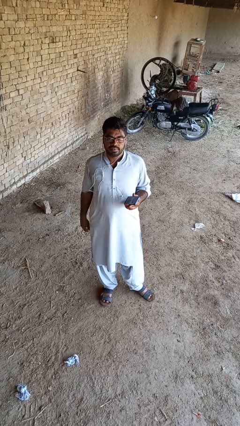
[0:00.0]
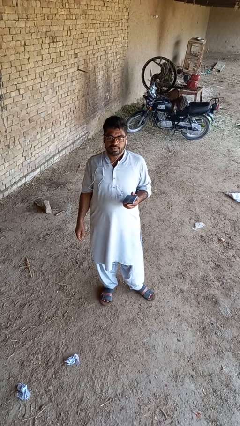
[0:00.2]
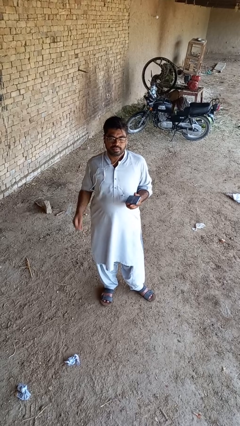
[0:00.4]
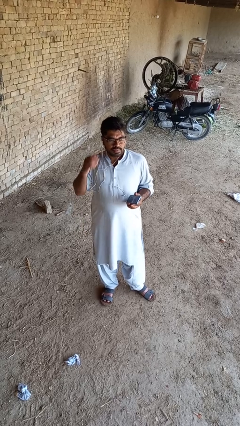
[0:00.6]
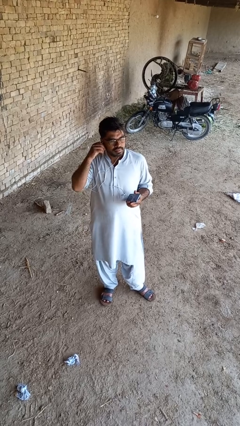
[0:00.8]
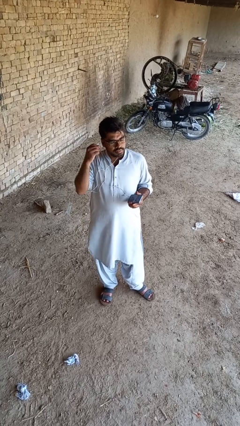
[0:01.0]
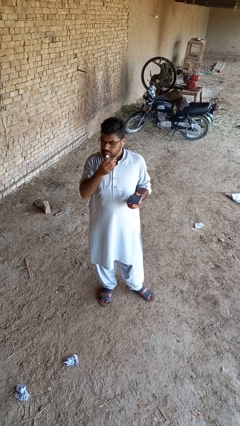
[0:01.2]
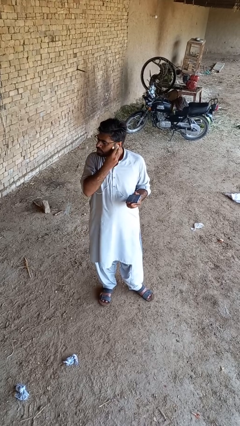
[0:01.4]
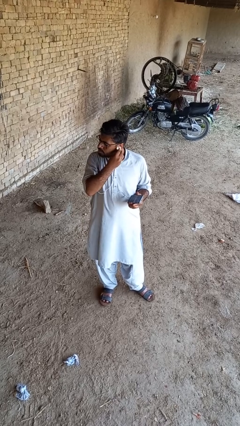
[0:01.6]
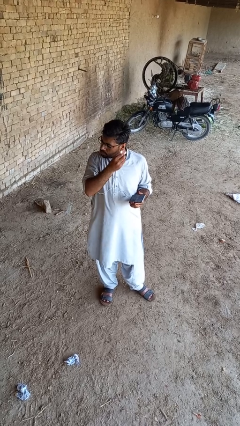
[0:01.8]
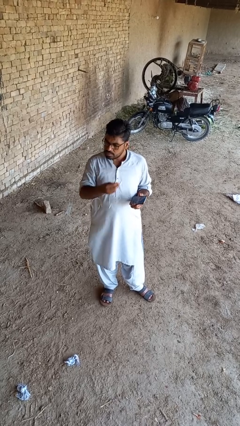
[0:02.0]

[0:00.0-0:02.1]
person takes off headphones

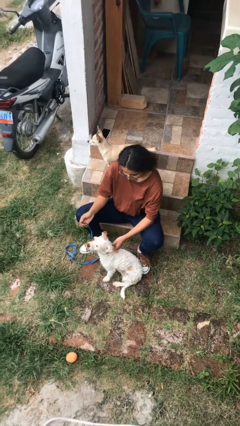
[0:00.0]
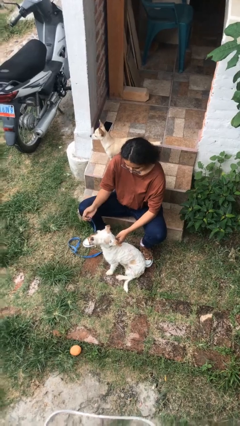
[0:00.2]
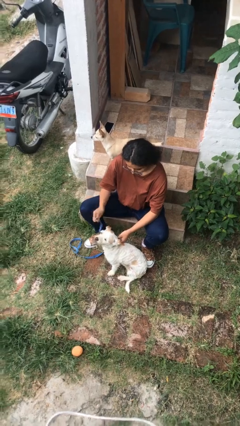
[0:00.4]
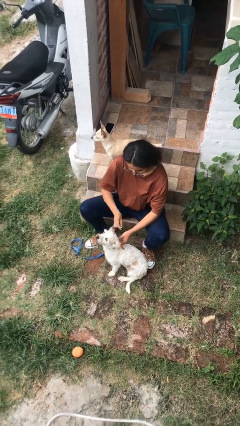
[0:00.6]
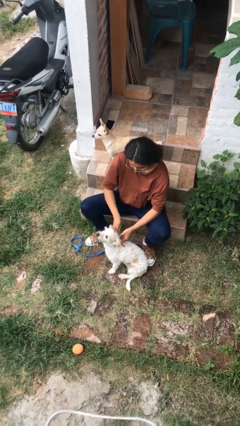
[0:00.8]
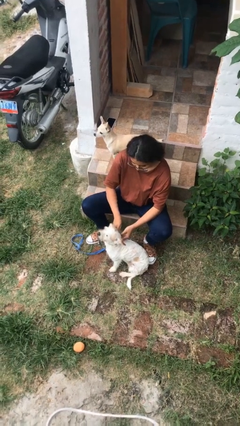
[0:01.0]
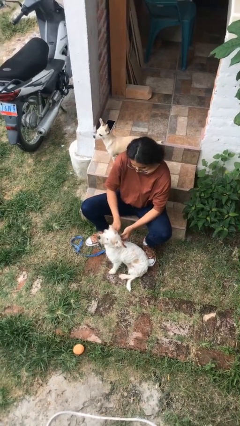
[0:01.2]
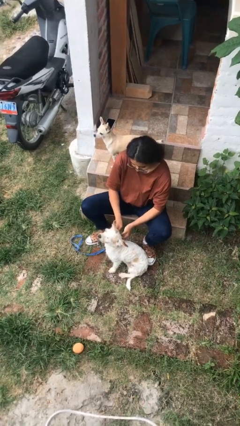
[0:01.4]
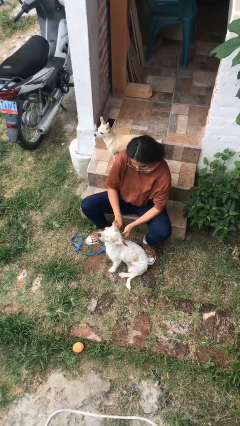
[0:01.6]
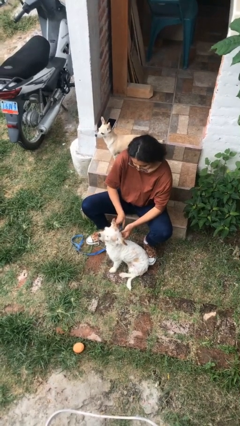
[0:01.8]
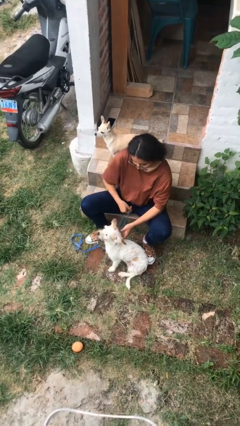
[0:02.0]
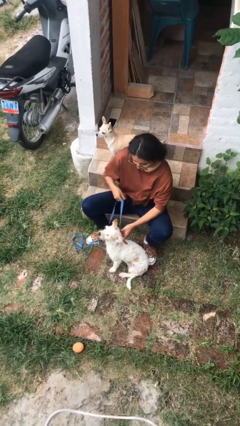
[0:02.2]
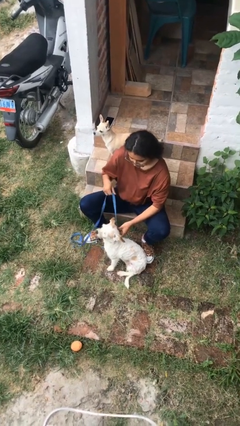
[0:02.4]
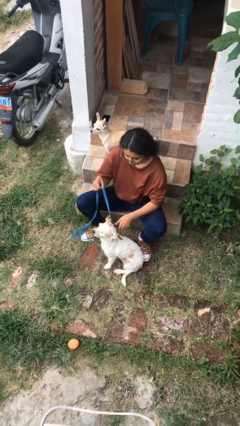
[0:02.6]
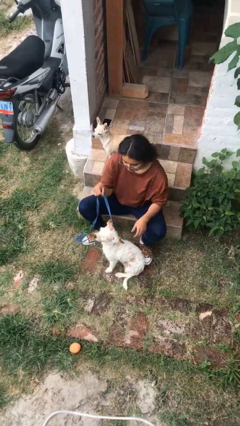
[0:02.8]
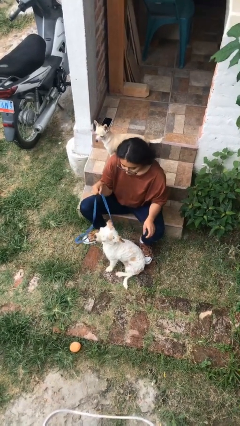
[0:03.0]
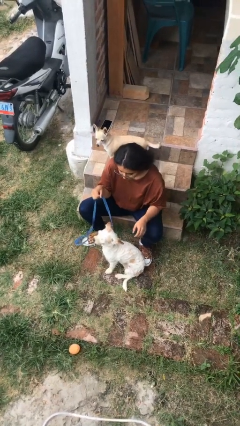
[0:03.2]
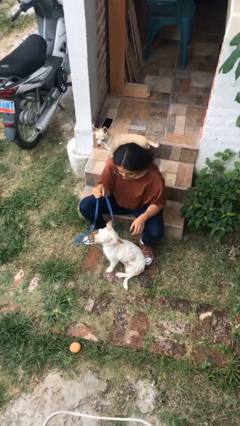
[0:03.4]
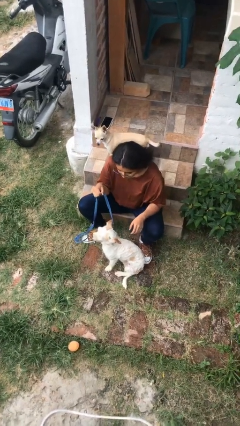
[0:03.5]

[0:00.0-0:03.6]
person attaches leash to dog

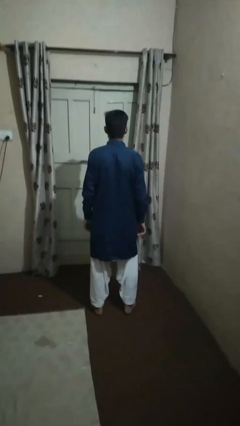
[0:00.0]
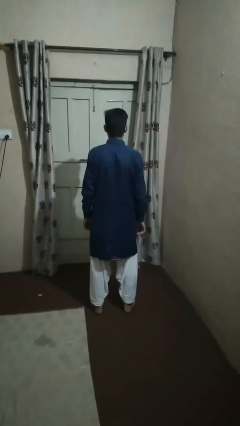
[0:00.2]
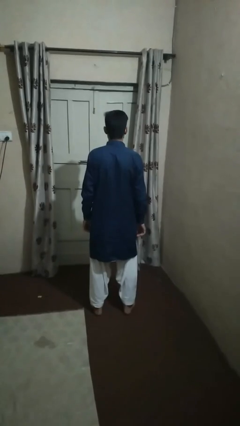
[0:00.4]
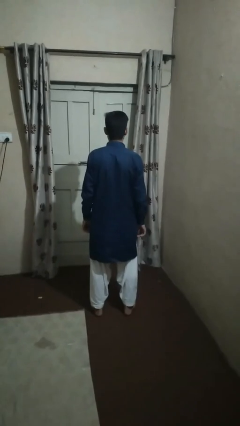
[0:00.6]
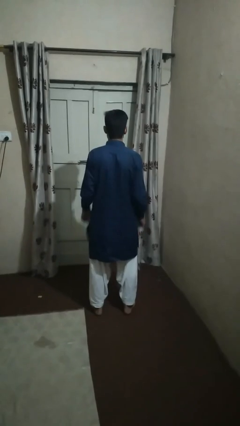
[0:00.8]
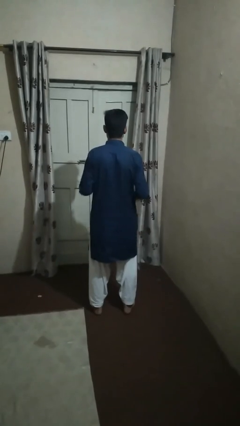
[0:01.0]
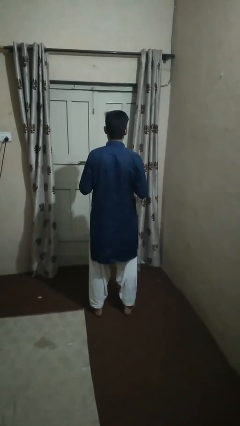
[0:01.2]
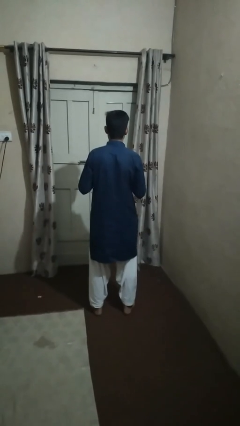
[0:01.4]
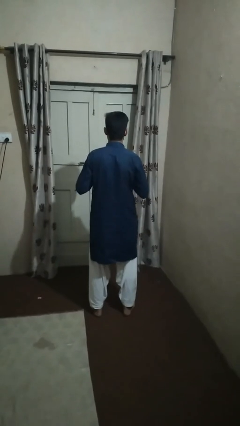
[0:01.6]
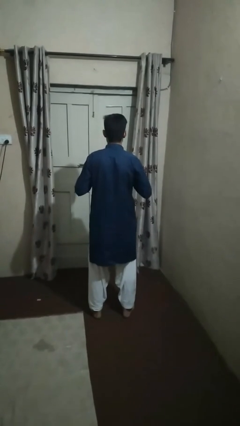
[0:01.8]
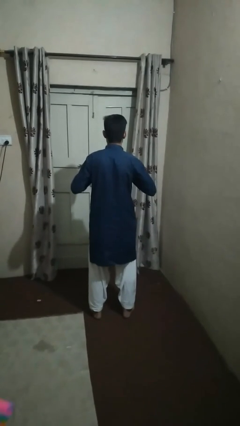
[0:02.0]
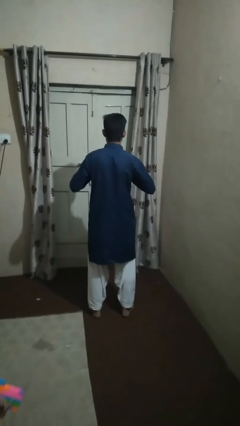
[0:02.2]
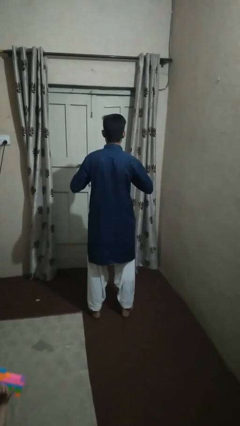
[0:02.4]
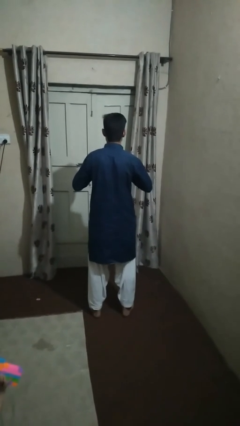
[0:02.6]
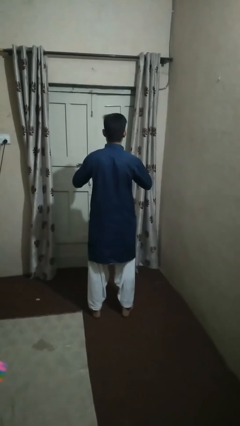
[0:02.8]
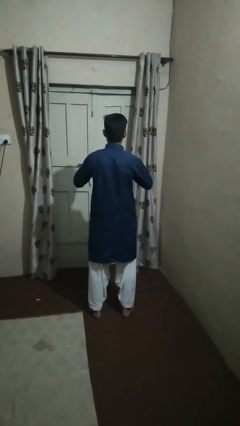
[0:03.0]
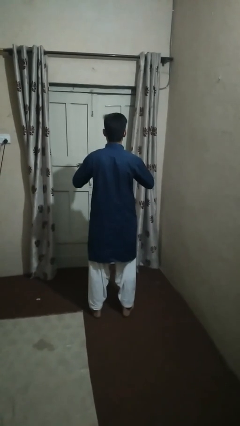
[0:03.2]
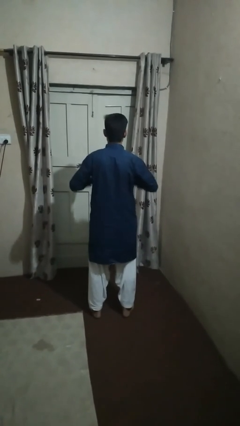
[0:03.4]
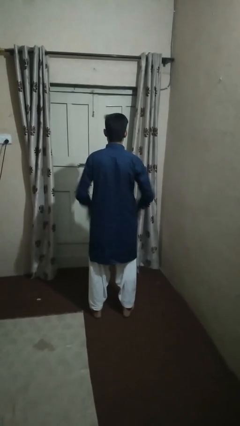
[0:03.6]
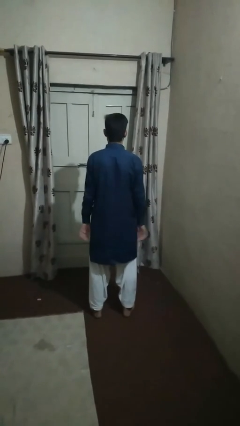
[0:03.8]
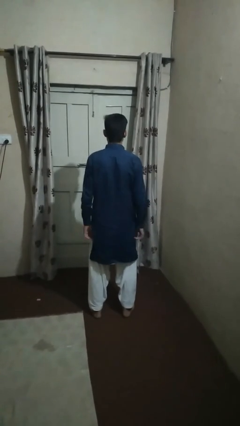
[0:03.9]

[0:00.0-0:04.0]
person unbuttons shirt

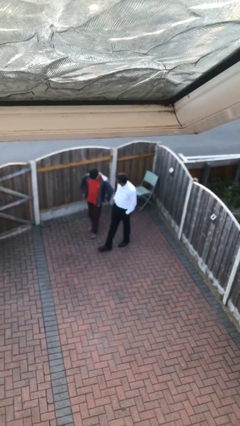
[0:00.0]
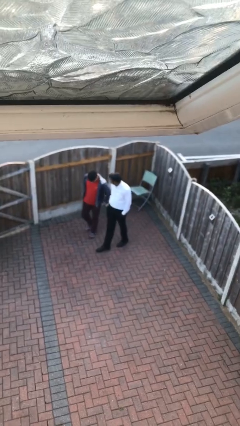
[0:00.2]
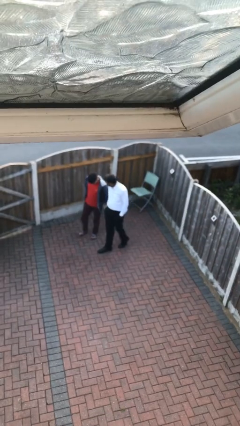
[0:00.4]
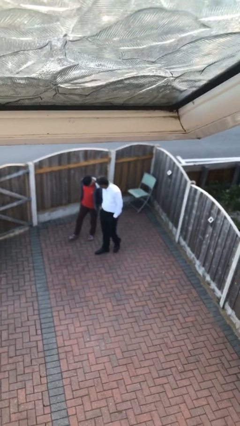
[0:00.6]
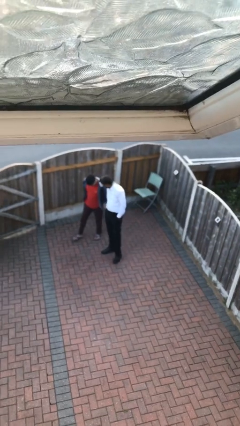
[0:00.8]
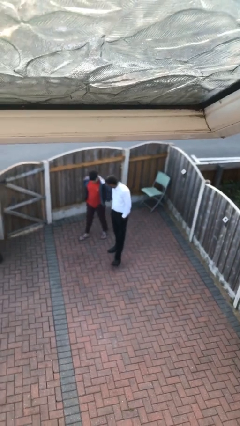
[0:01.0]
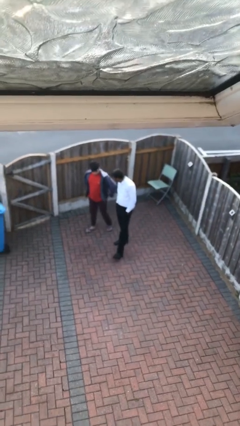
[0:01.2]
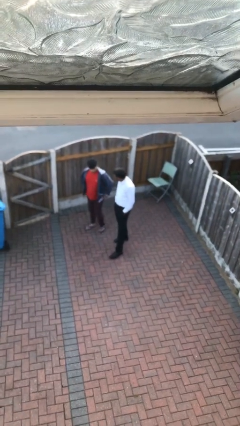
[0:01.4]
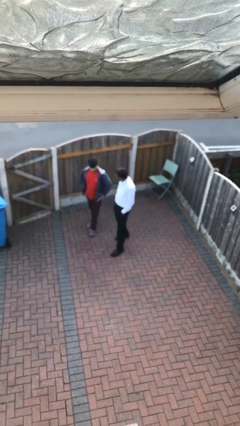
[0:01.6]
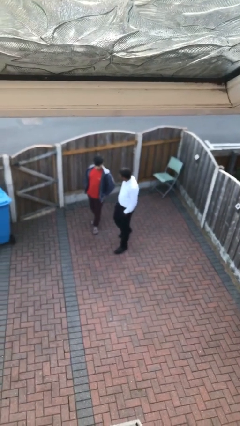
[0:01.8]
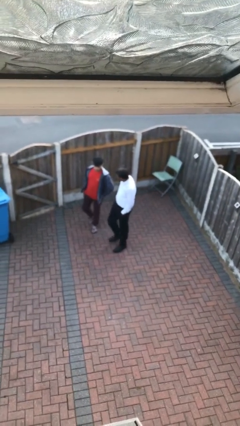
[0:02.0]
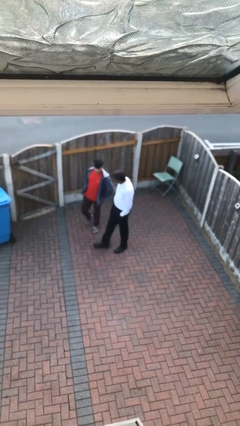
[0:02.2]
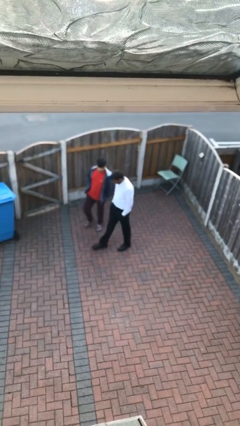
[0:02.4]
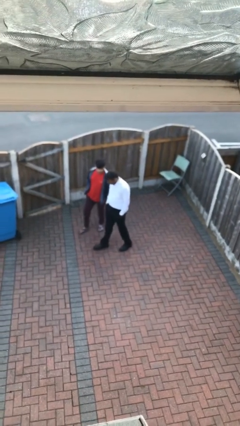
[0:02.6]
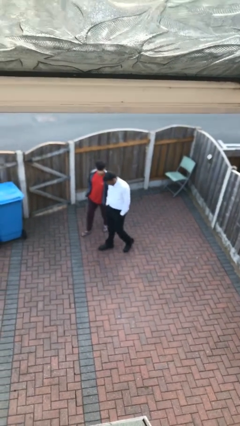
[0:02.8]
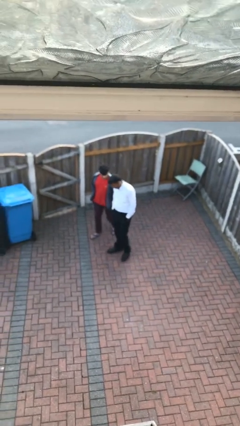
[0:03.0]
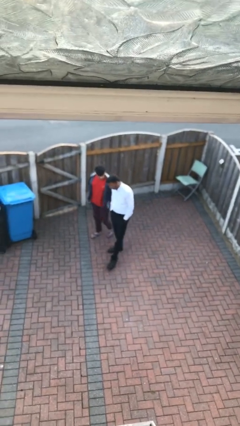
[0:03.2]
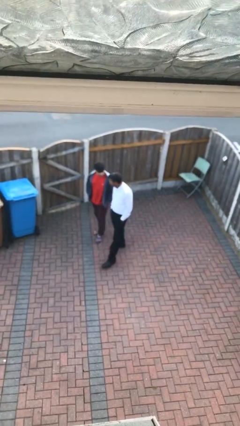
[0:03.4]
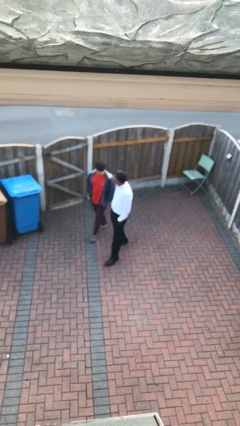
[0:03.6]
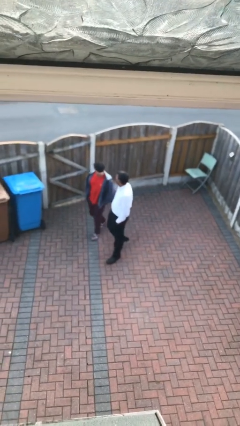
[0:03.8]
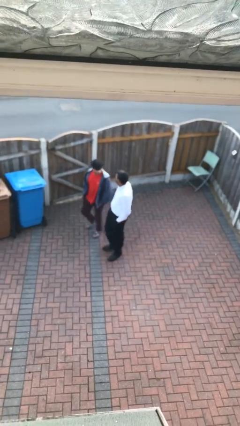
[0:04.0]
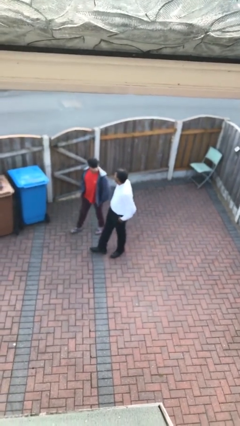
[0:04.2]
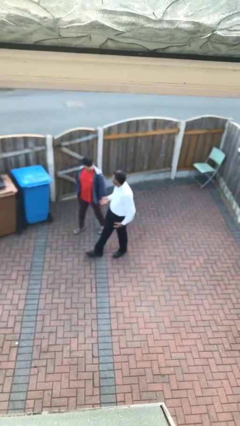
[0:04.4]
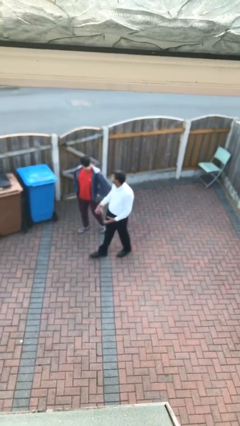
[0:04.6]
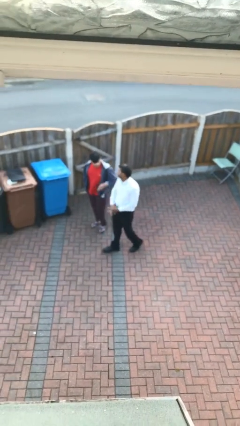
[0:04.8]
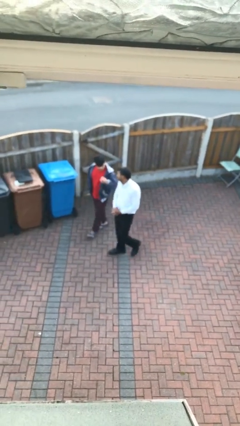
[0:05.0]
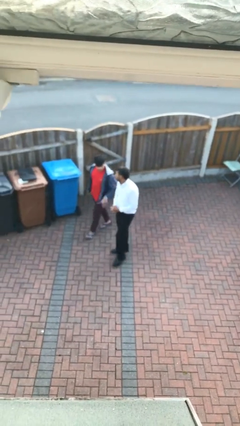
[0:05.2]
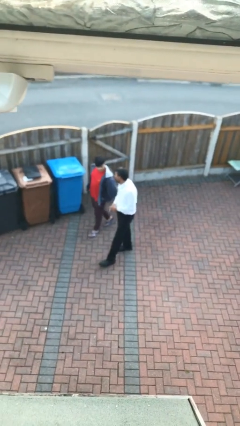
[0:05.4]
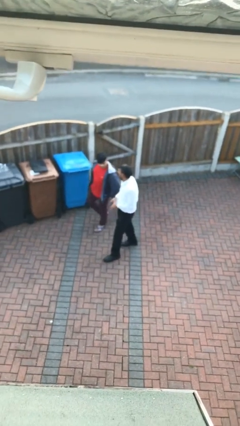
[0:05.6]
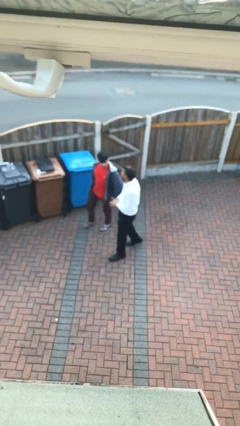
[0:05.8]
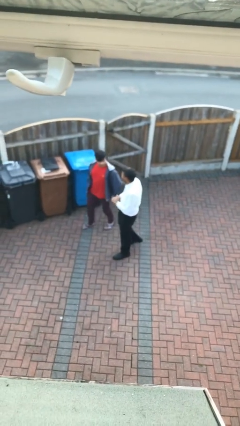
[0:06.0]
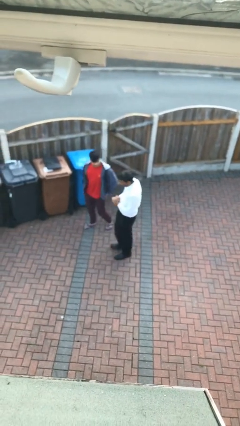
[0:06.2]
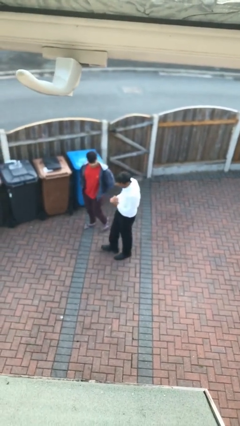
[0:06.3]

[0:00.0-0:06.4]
person talks to person

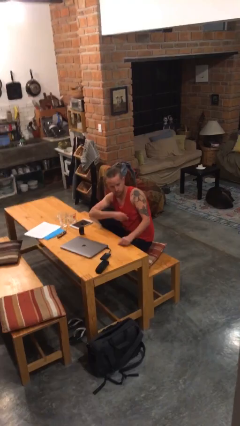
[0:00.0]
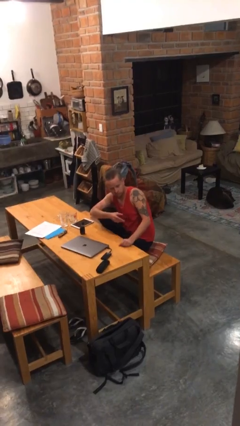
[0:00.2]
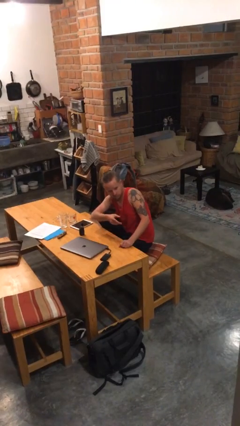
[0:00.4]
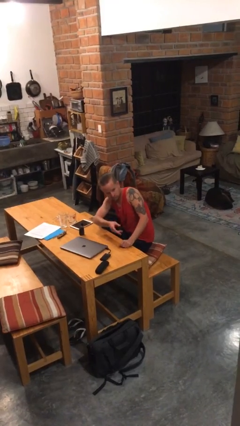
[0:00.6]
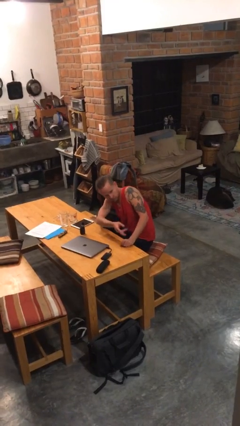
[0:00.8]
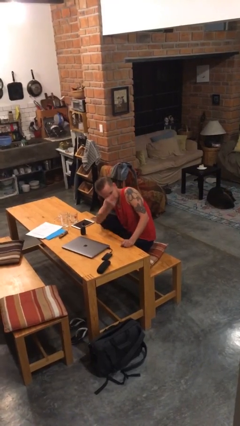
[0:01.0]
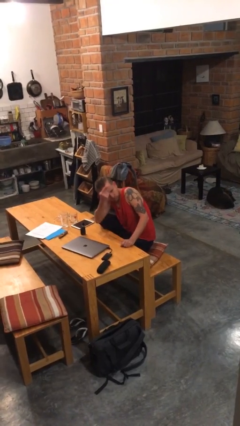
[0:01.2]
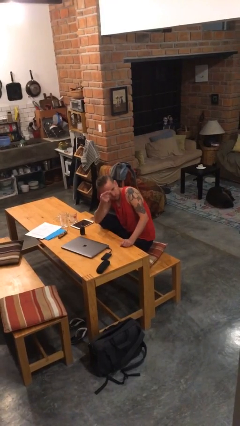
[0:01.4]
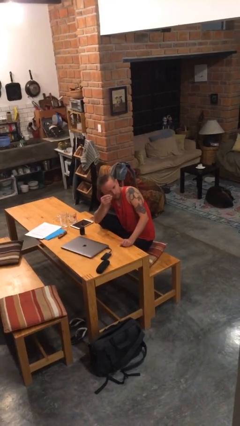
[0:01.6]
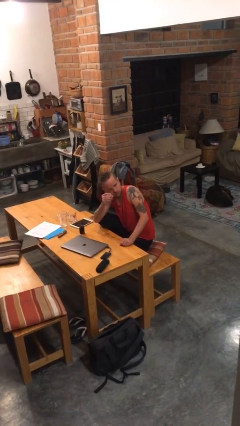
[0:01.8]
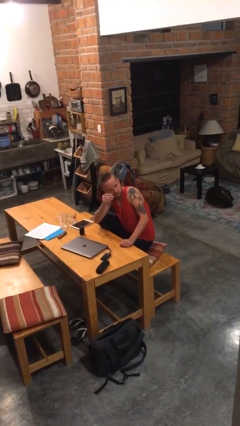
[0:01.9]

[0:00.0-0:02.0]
person gestures swipe up
